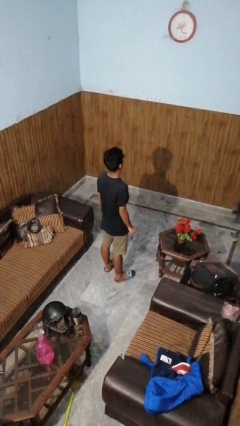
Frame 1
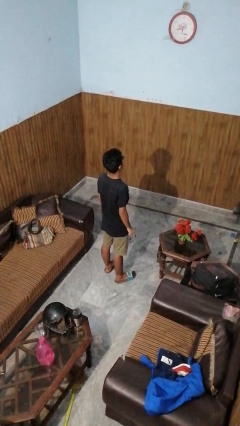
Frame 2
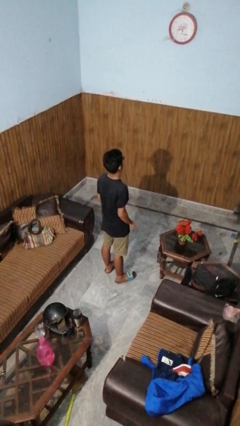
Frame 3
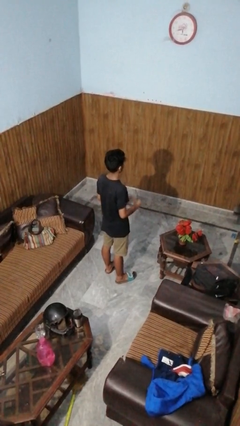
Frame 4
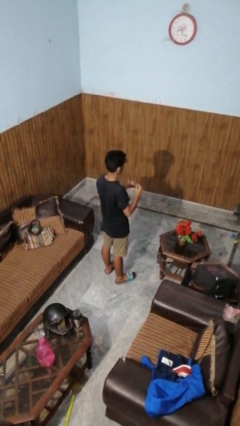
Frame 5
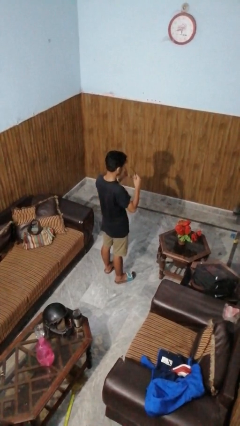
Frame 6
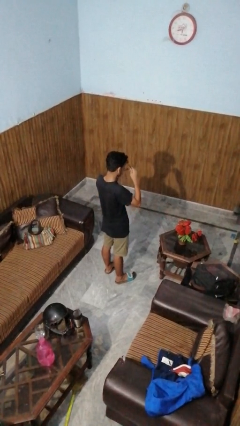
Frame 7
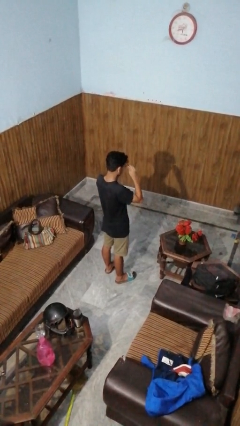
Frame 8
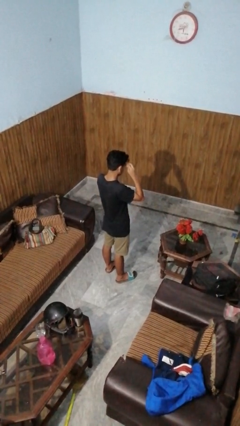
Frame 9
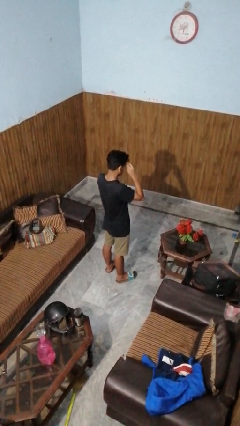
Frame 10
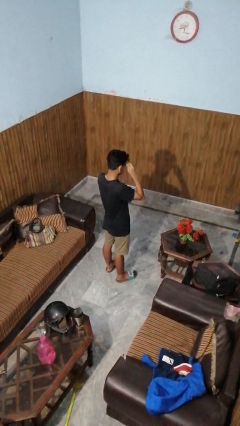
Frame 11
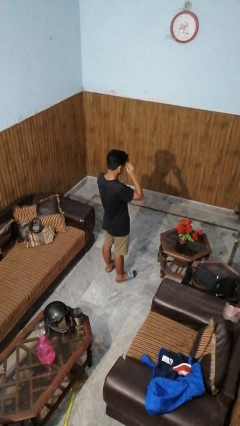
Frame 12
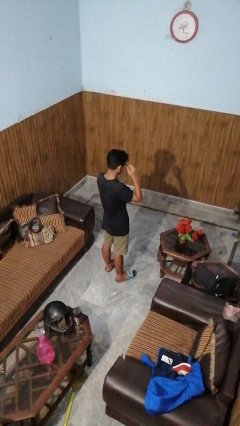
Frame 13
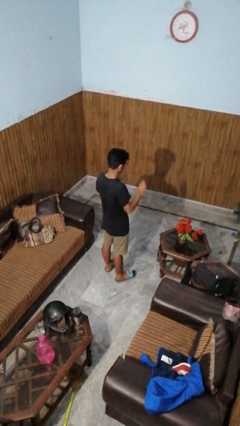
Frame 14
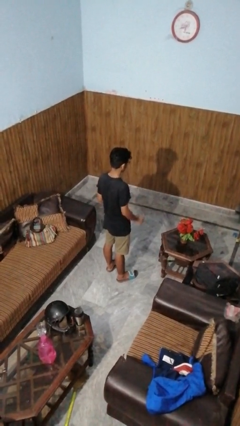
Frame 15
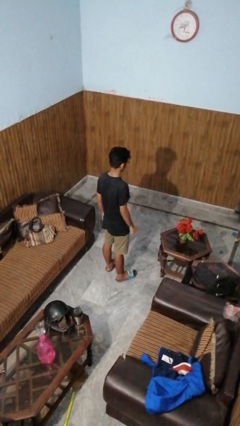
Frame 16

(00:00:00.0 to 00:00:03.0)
person puts on glasses

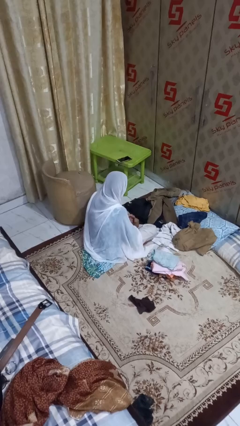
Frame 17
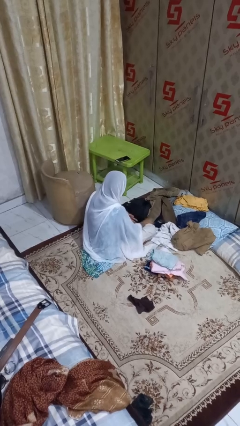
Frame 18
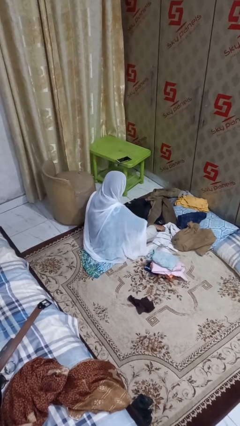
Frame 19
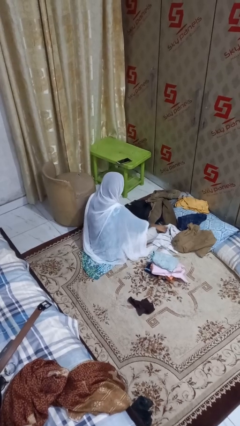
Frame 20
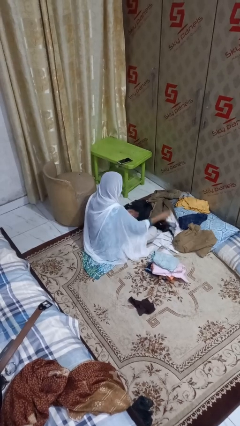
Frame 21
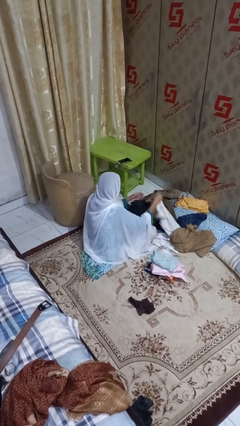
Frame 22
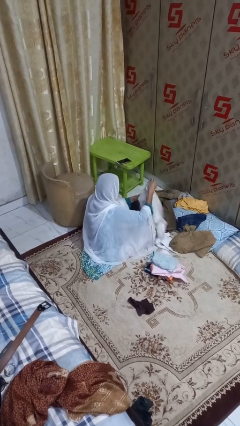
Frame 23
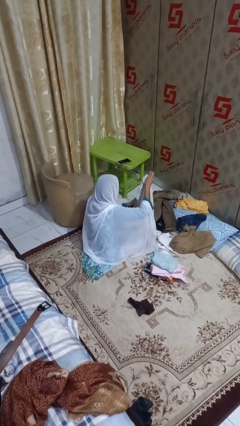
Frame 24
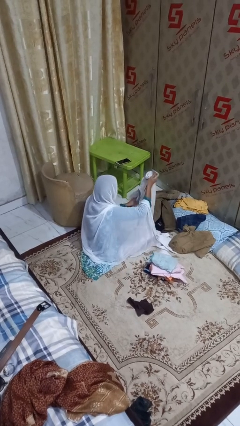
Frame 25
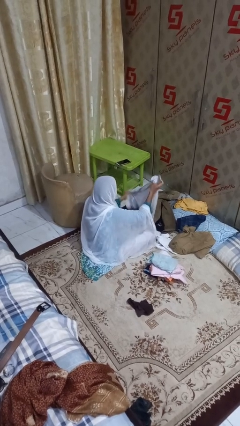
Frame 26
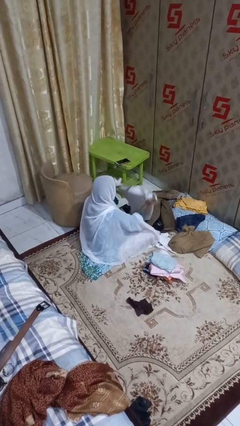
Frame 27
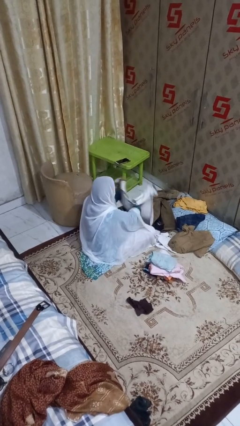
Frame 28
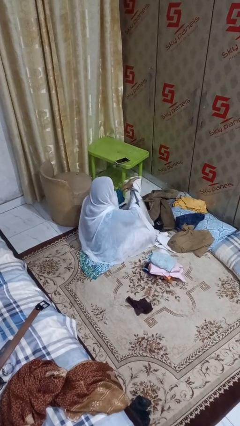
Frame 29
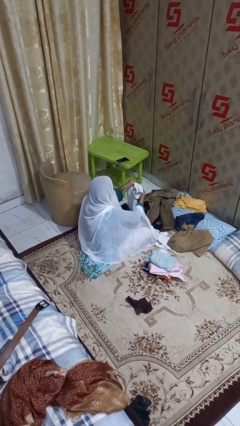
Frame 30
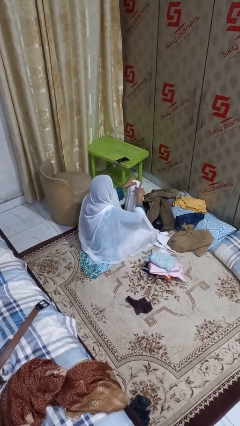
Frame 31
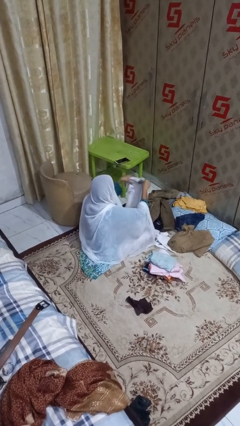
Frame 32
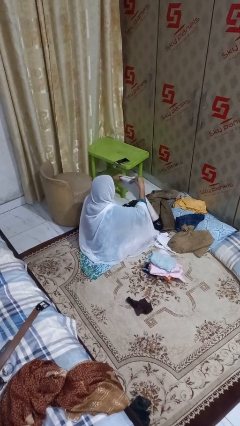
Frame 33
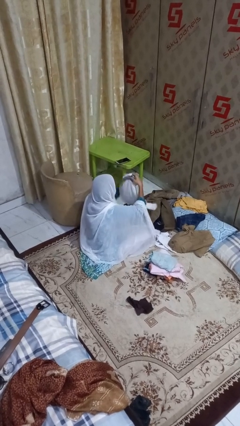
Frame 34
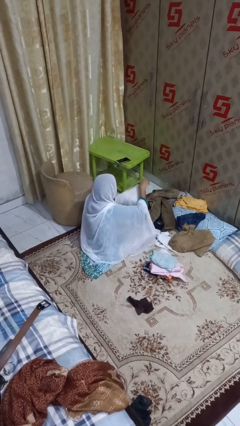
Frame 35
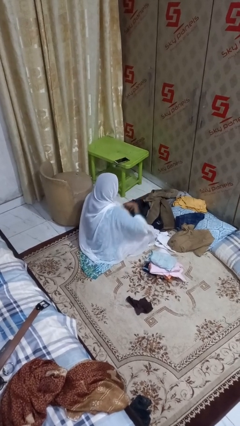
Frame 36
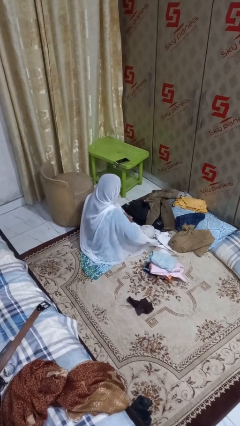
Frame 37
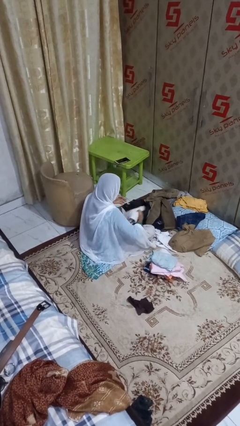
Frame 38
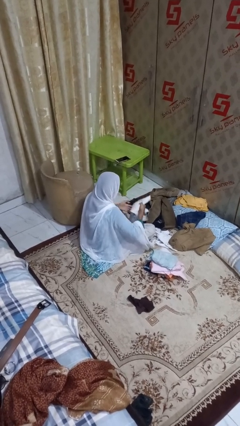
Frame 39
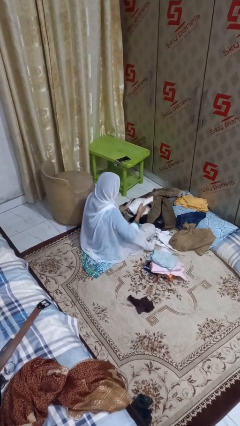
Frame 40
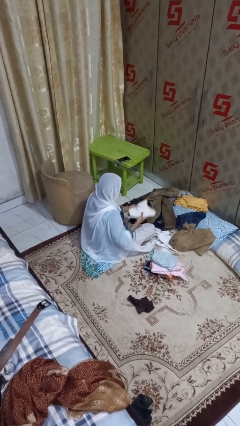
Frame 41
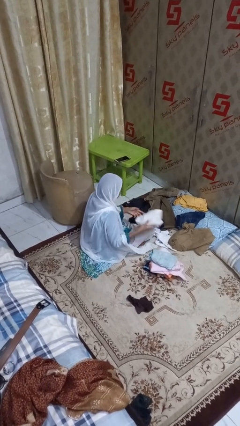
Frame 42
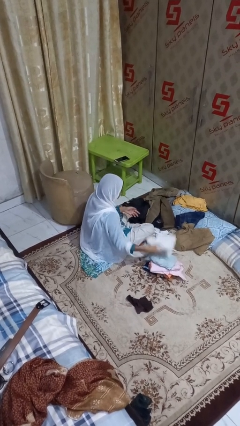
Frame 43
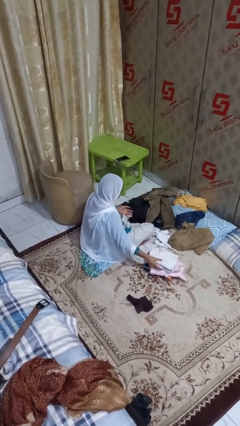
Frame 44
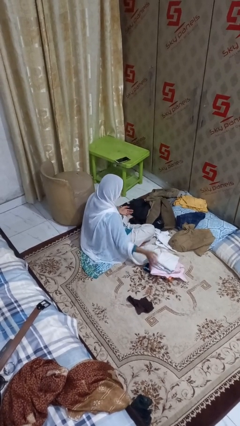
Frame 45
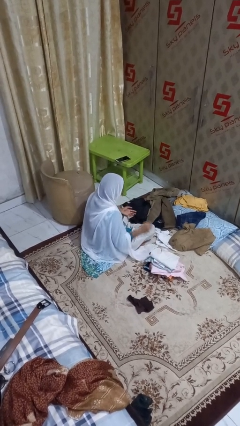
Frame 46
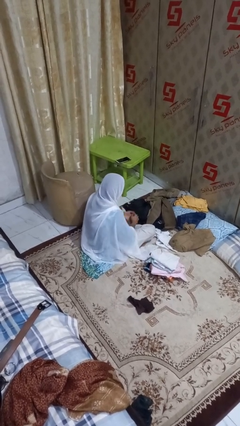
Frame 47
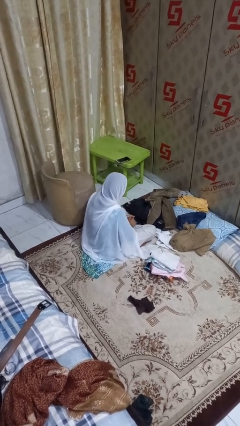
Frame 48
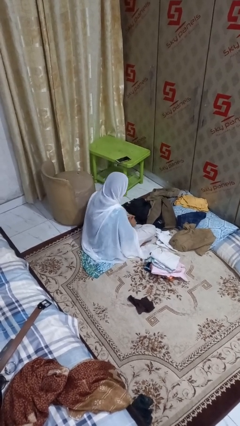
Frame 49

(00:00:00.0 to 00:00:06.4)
person folds shirt

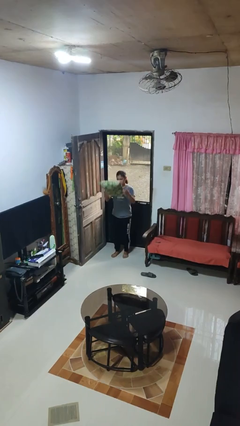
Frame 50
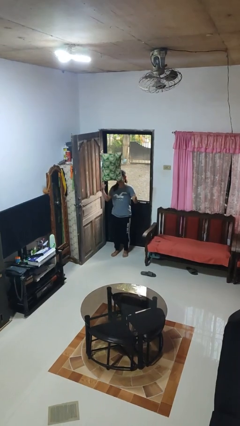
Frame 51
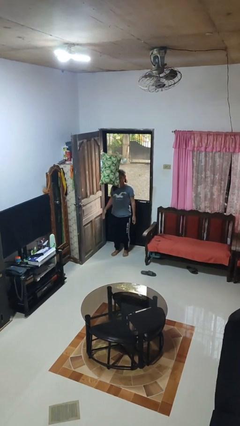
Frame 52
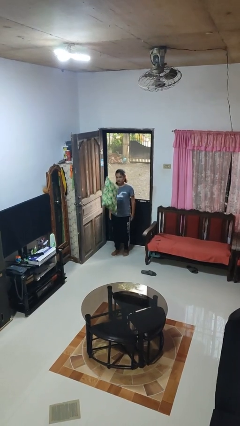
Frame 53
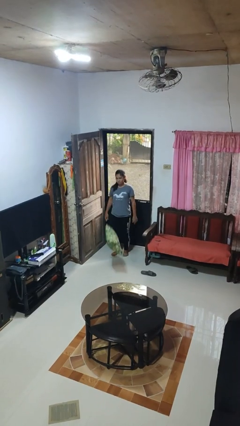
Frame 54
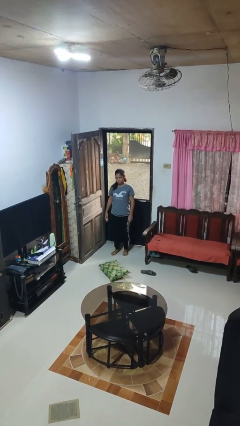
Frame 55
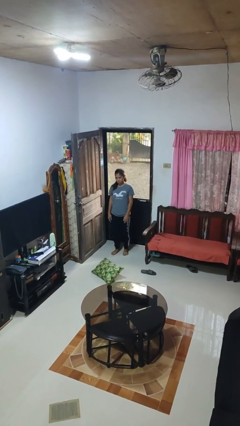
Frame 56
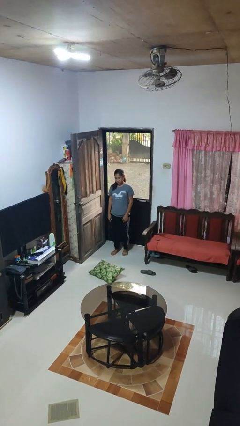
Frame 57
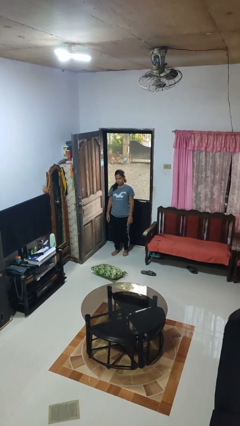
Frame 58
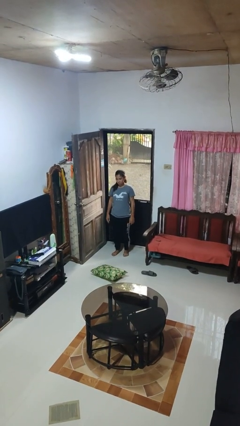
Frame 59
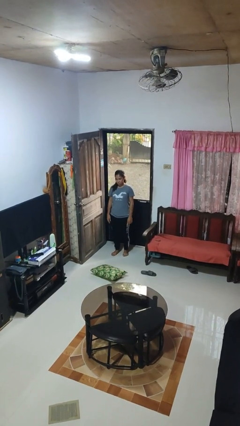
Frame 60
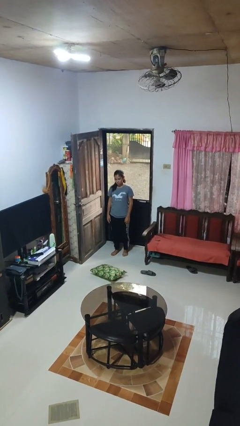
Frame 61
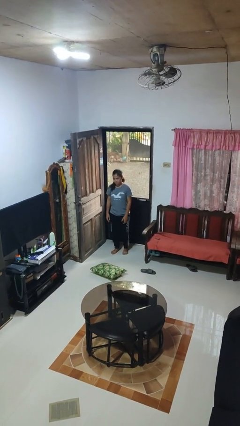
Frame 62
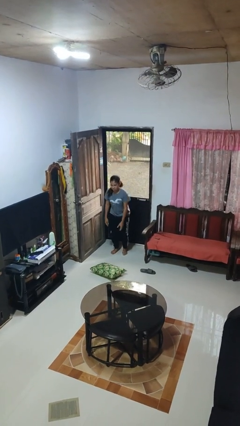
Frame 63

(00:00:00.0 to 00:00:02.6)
person throws object into air

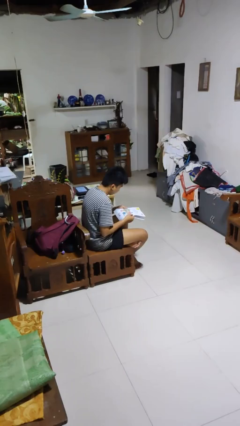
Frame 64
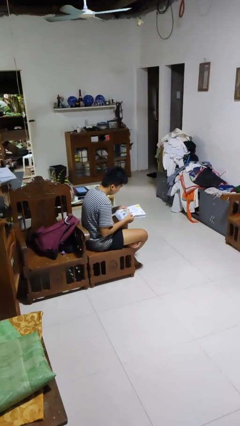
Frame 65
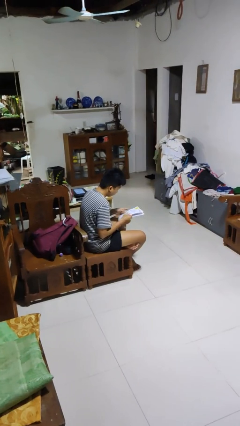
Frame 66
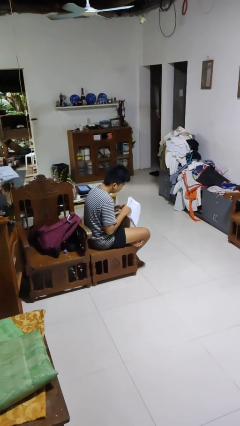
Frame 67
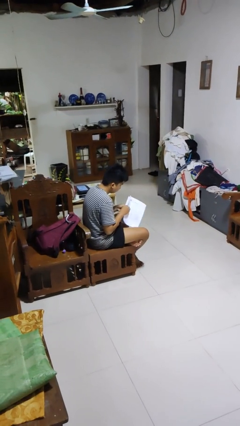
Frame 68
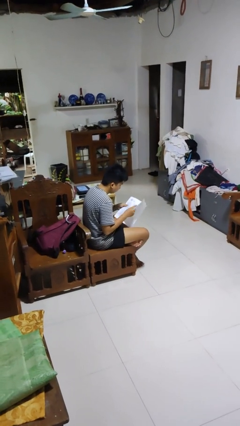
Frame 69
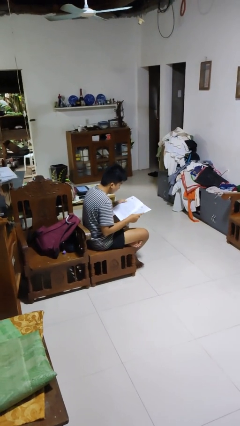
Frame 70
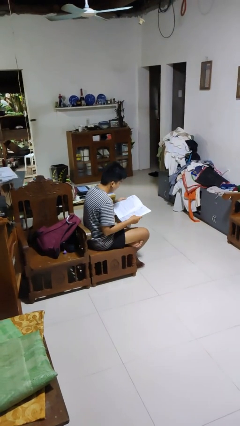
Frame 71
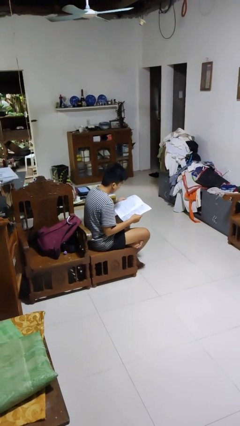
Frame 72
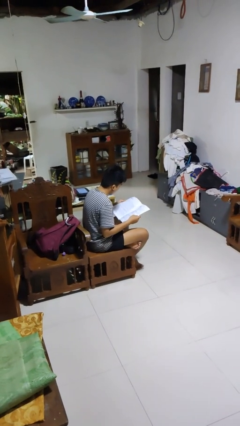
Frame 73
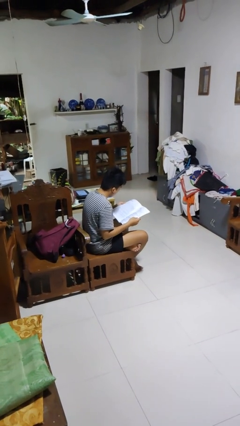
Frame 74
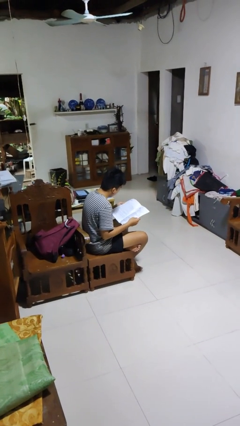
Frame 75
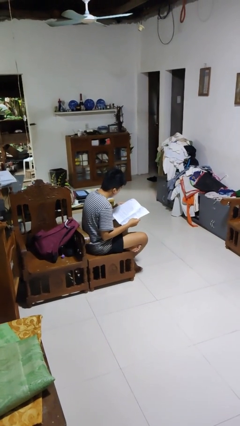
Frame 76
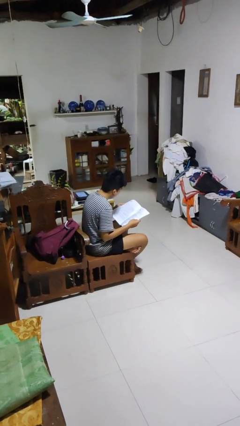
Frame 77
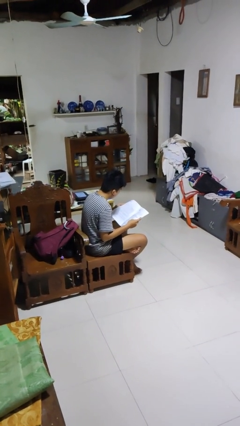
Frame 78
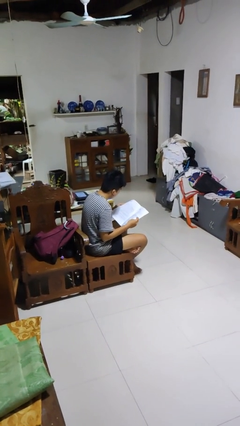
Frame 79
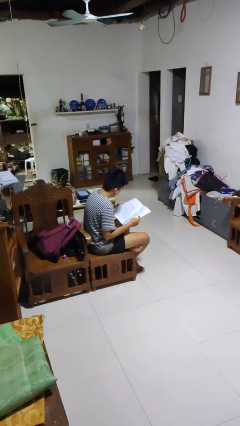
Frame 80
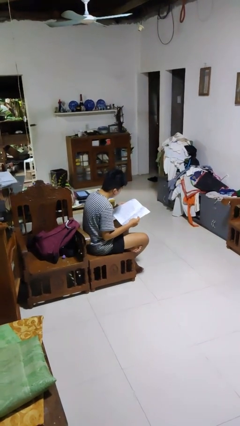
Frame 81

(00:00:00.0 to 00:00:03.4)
person reads newspaper

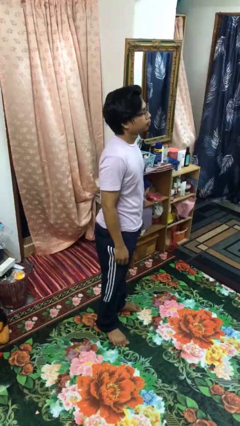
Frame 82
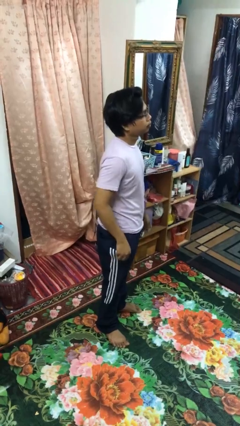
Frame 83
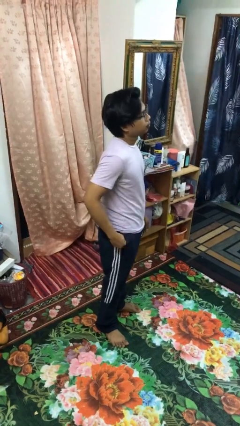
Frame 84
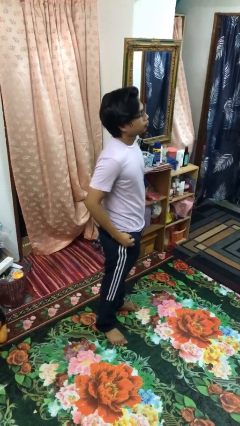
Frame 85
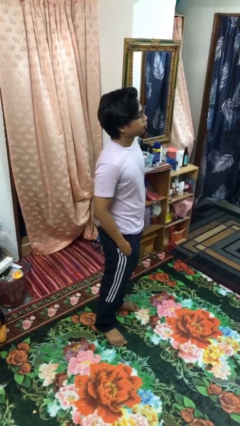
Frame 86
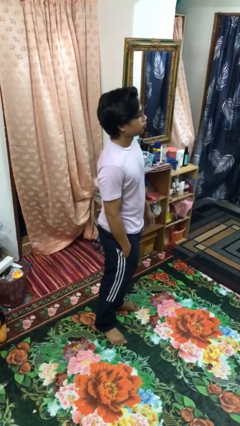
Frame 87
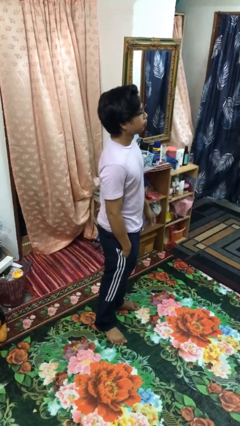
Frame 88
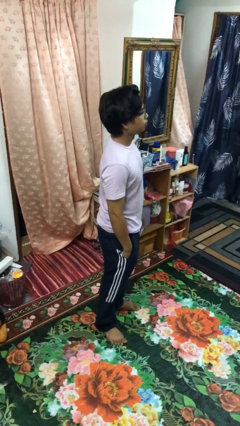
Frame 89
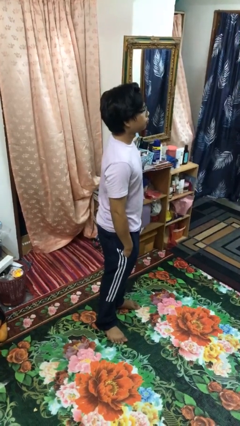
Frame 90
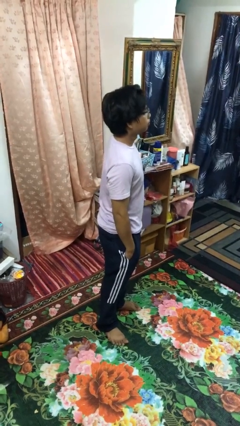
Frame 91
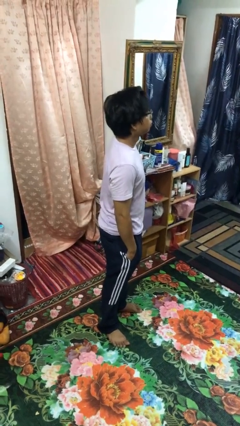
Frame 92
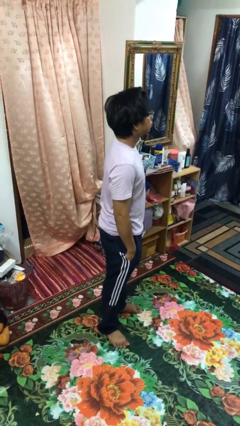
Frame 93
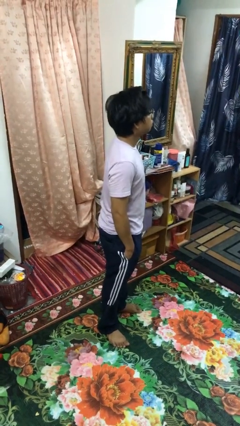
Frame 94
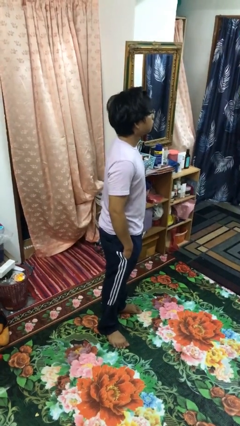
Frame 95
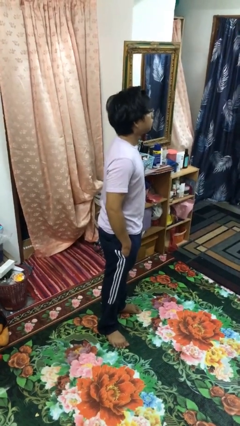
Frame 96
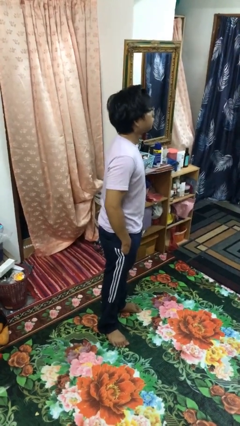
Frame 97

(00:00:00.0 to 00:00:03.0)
person puts hands in back pockets
